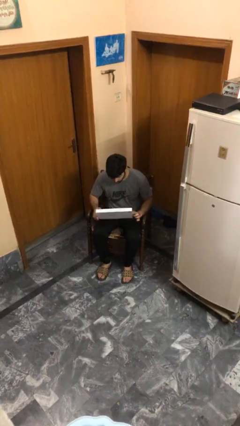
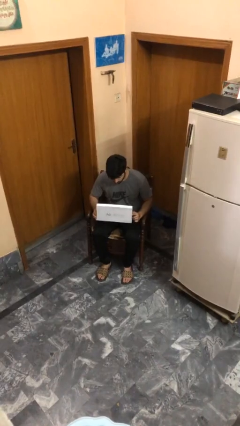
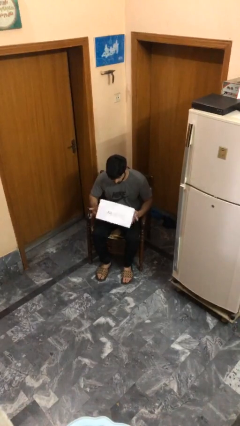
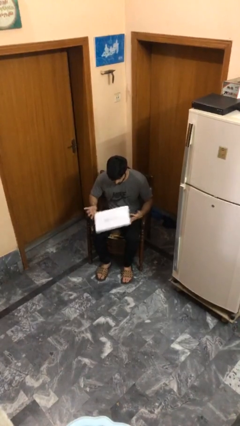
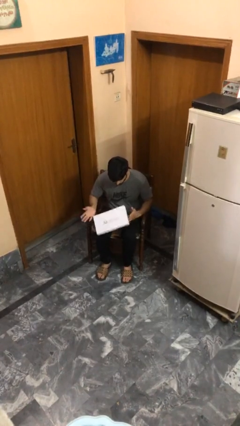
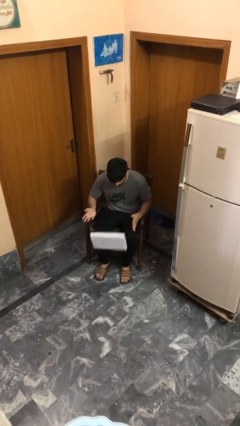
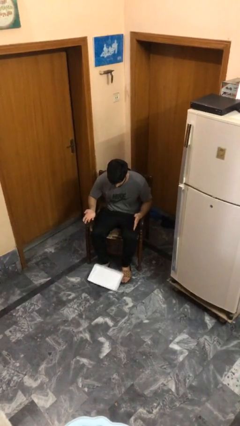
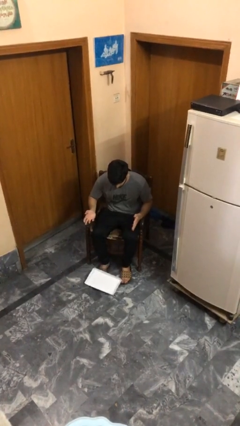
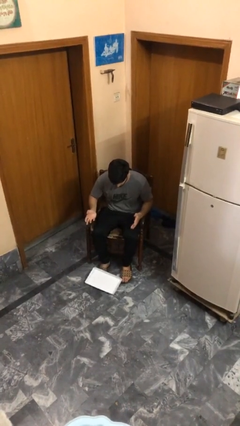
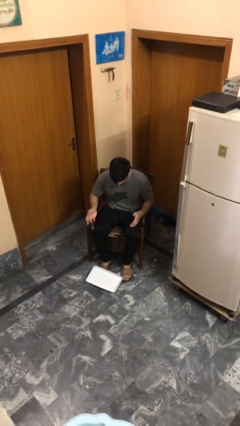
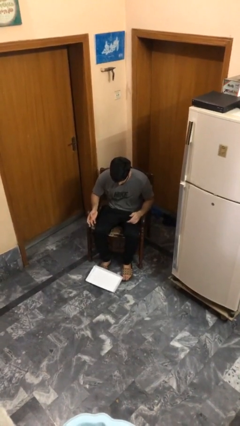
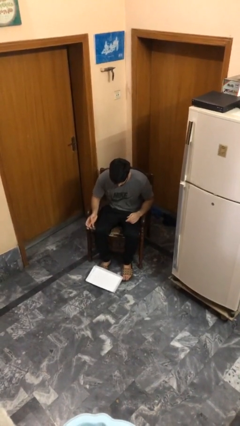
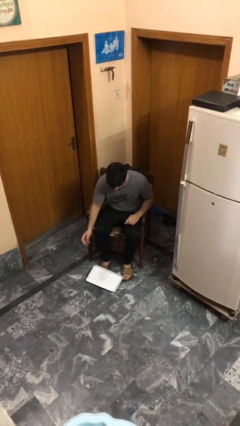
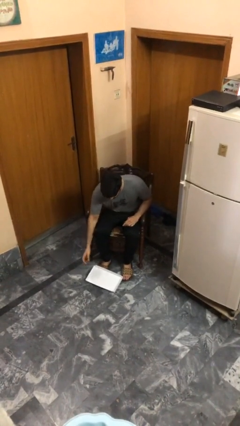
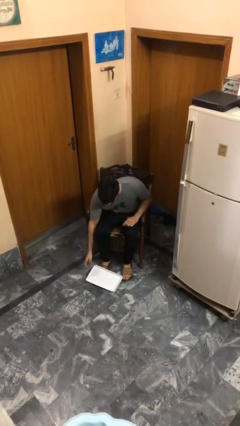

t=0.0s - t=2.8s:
person drops object

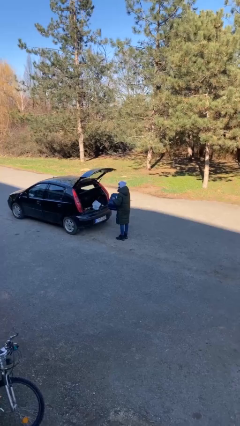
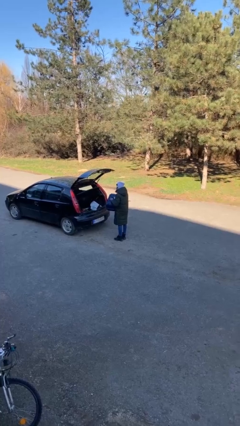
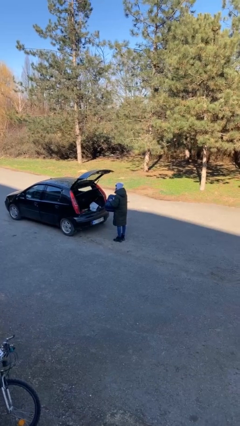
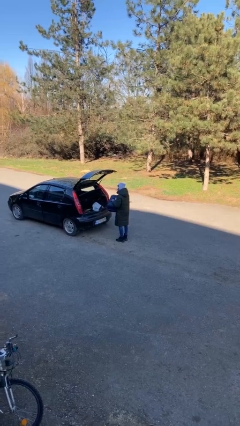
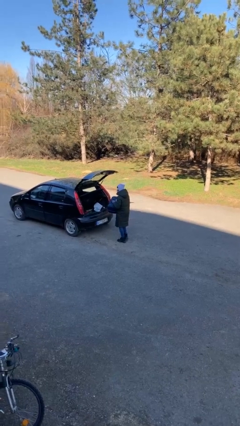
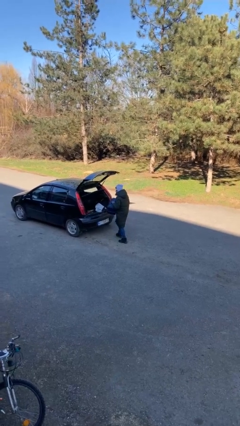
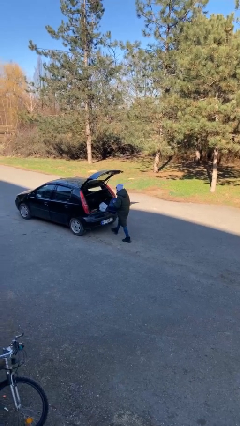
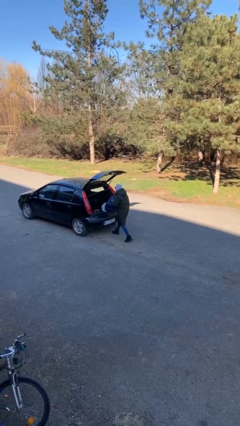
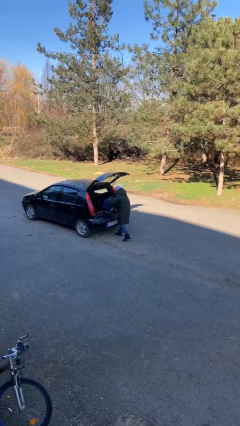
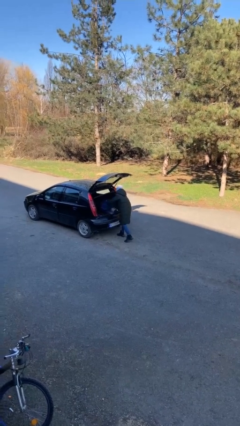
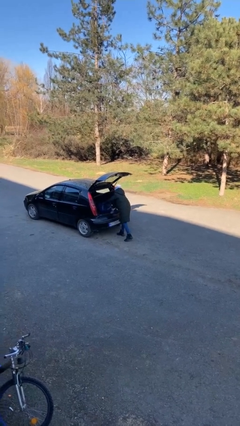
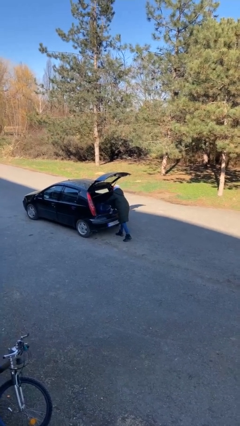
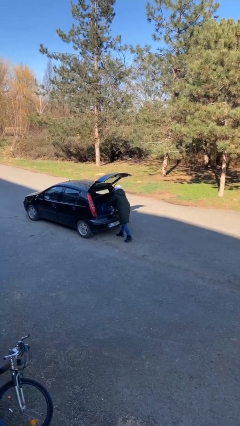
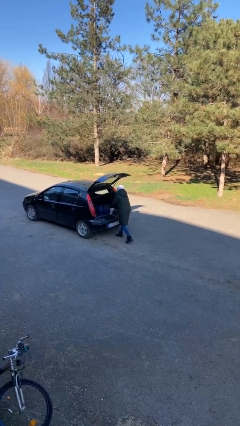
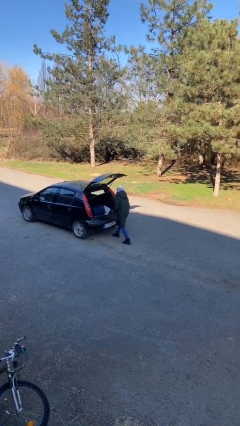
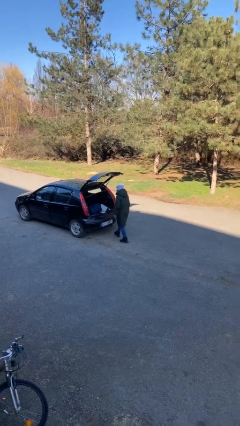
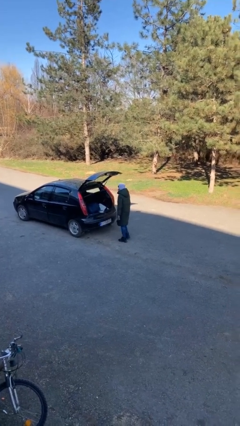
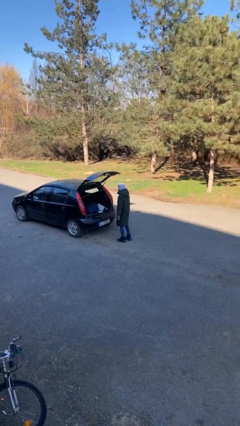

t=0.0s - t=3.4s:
person loads car

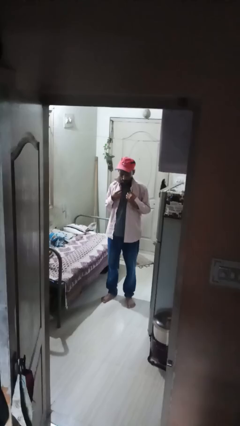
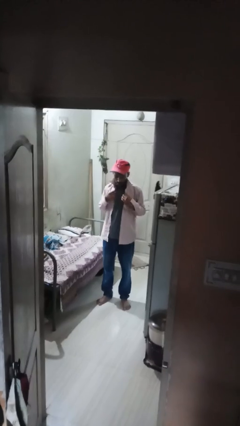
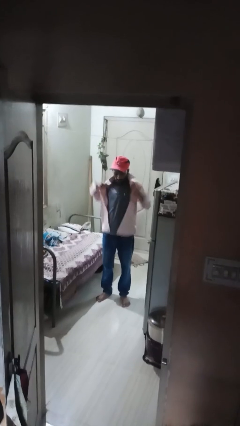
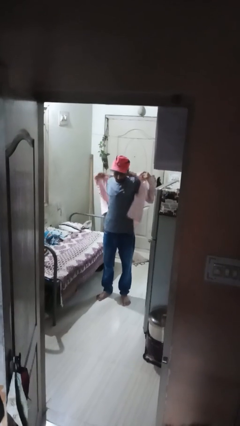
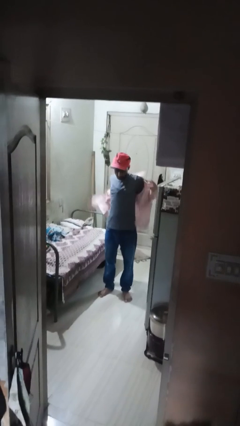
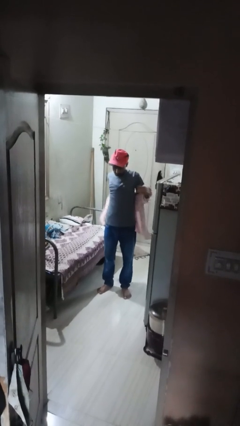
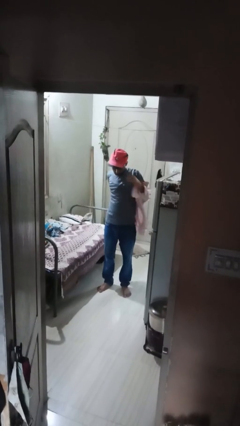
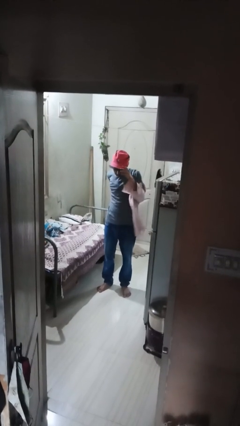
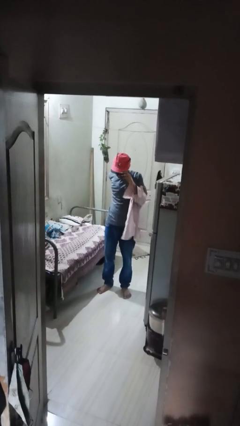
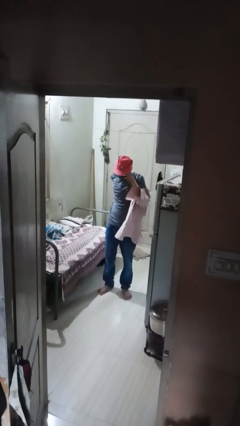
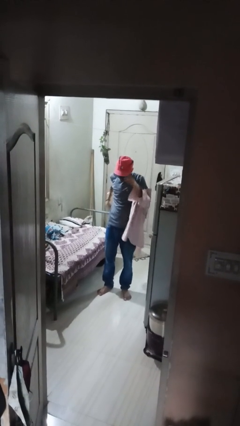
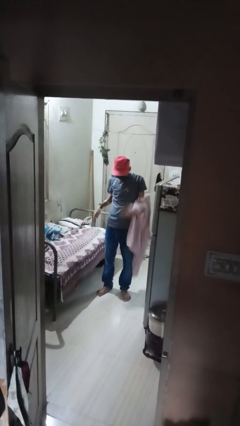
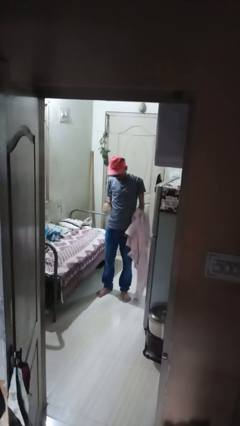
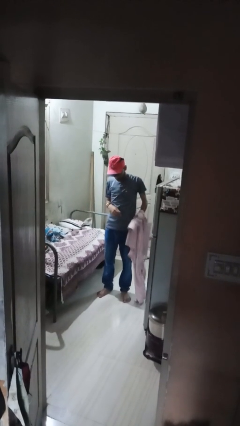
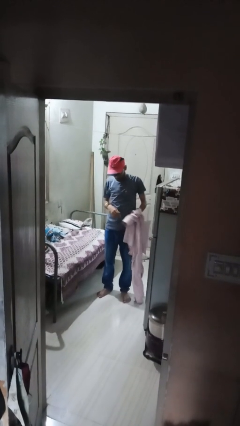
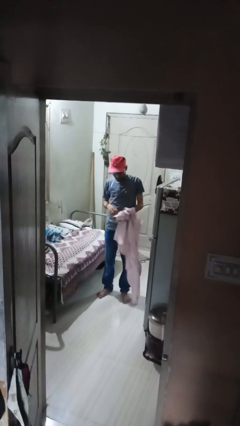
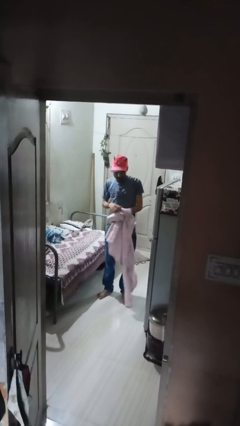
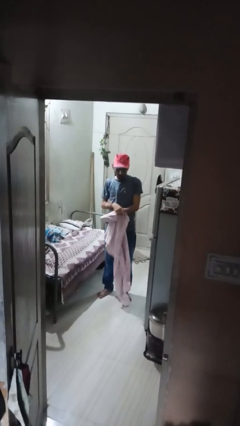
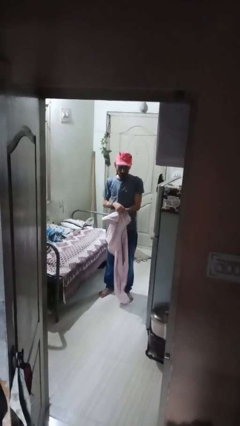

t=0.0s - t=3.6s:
person takes off shirt

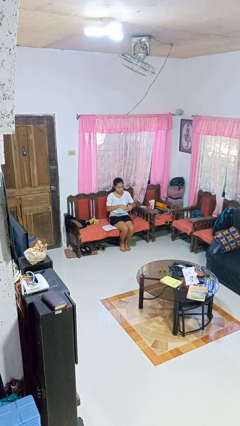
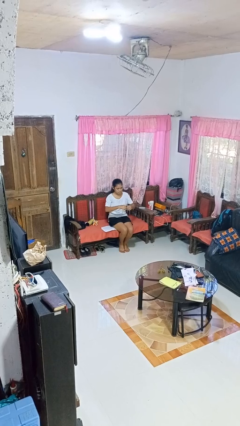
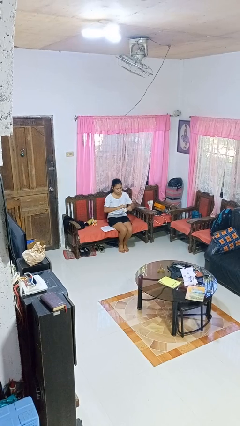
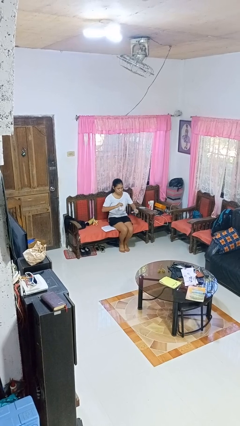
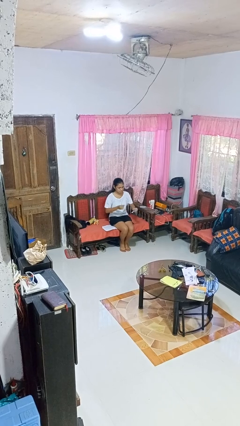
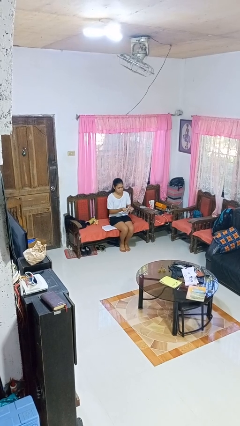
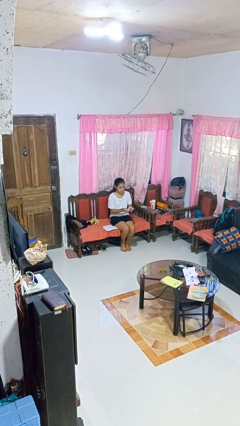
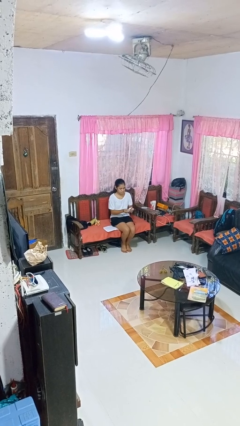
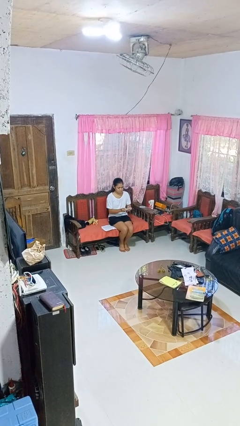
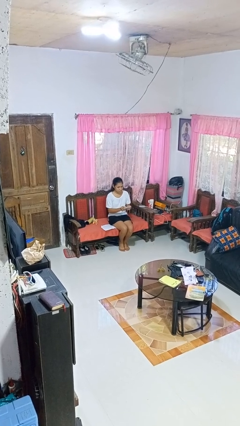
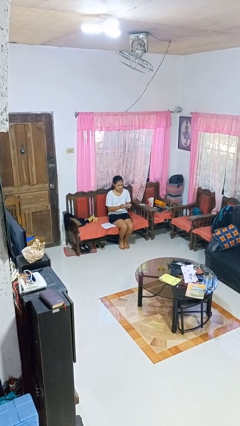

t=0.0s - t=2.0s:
person tears paper

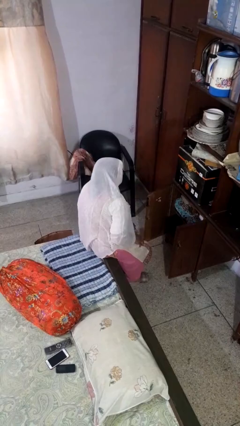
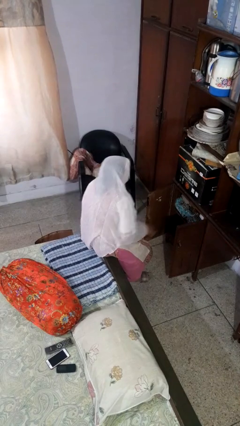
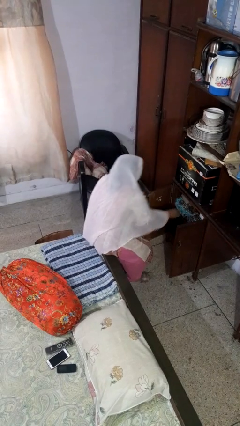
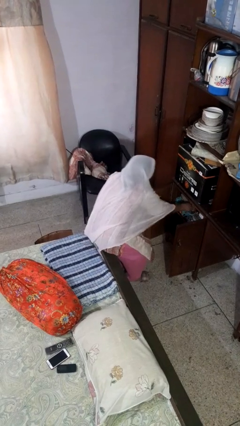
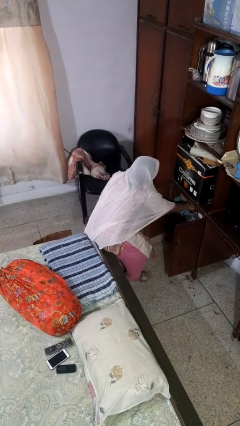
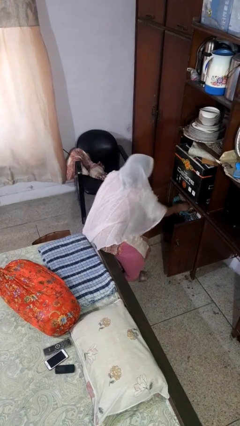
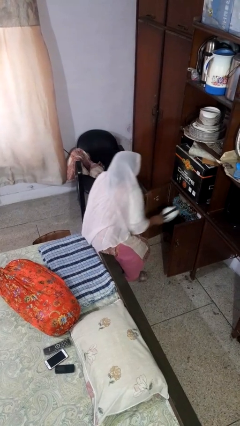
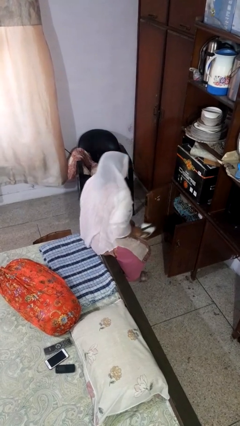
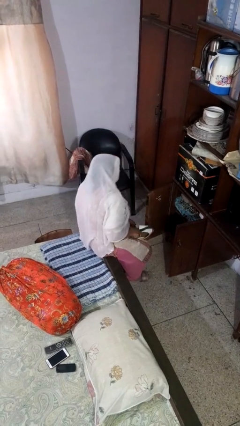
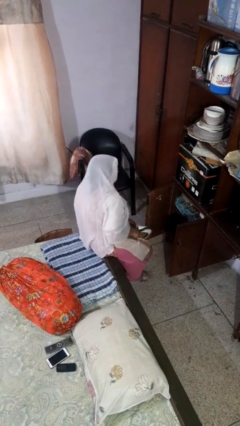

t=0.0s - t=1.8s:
person takes object from cabinet

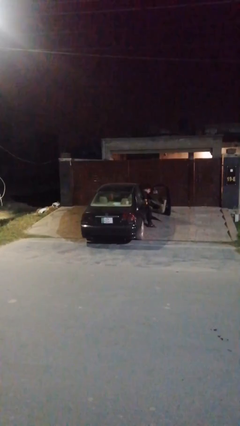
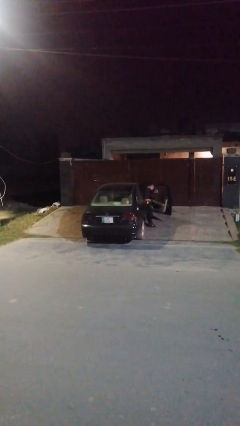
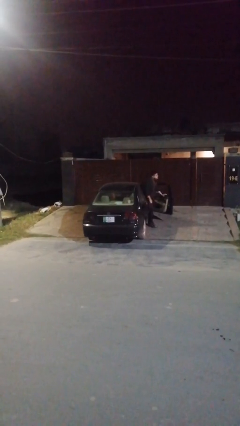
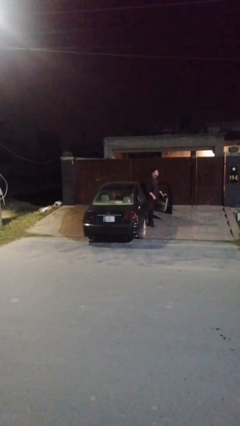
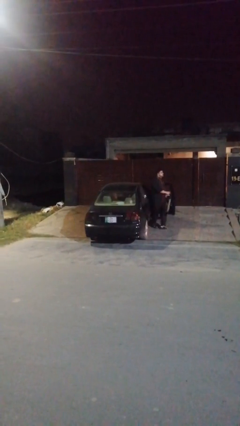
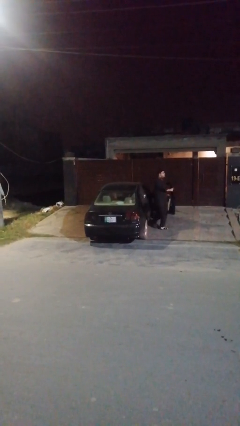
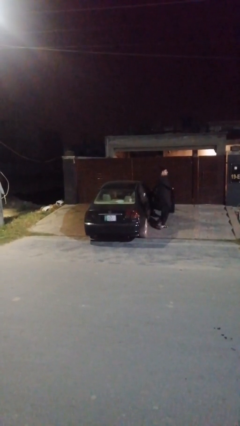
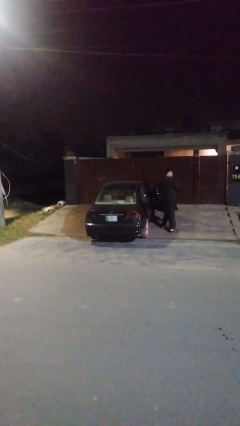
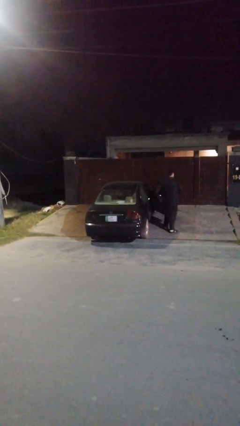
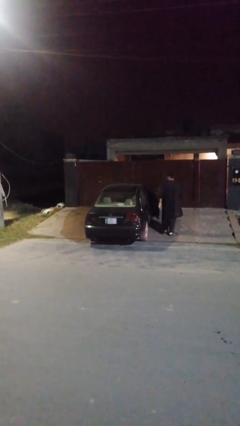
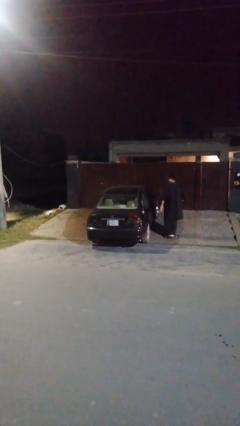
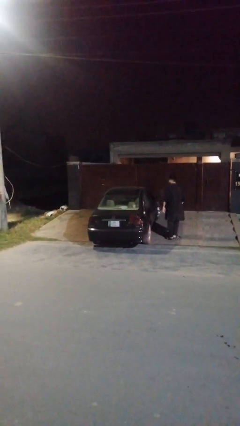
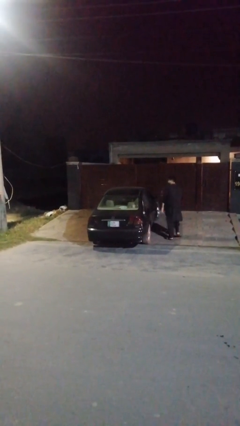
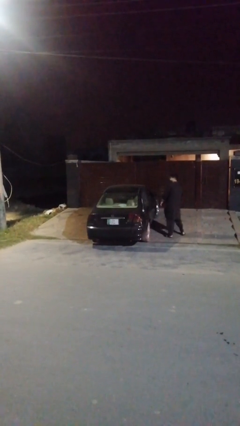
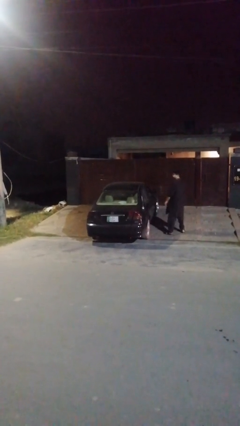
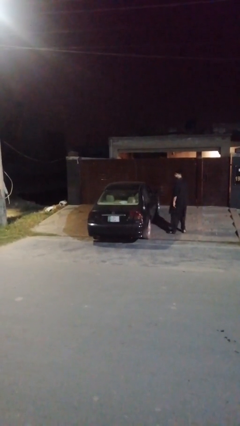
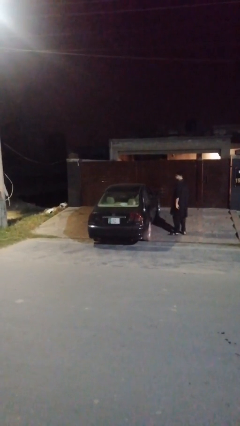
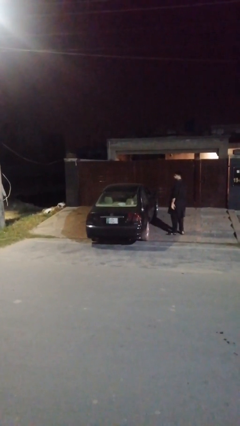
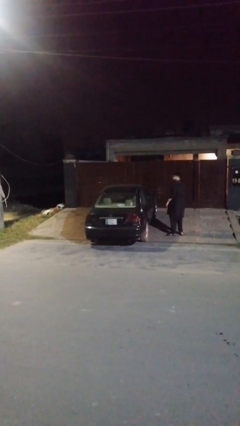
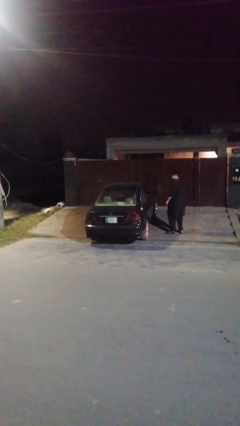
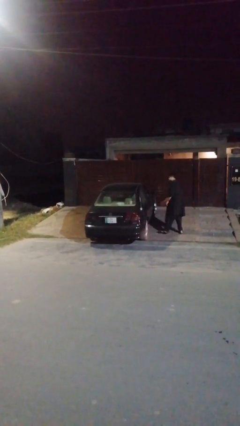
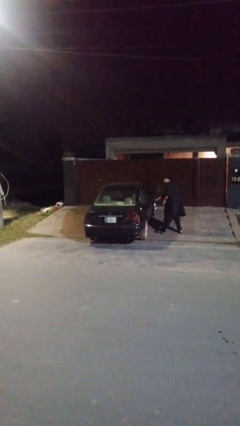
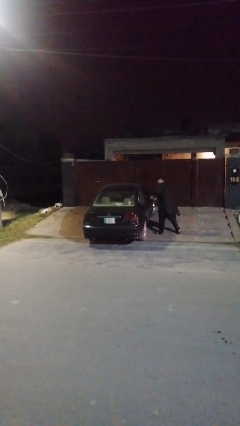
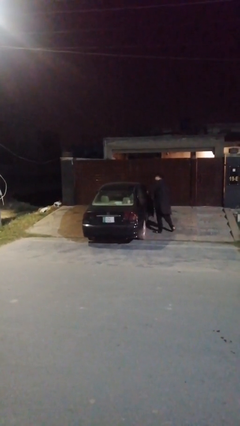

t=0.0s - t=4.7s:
car drops off person
